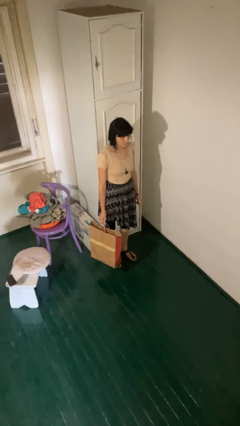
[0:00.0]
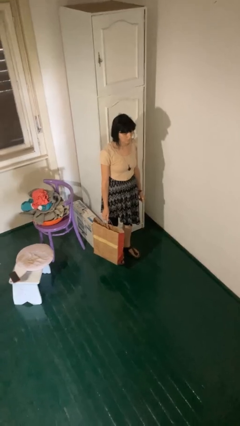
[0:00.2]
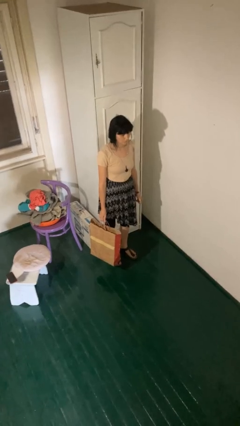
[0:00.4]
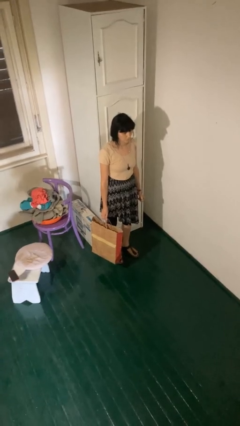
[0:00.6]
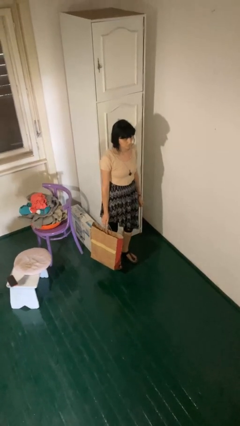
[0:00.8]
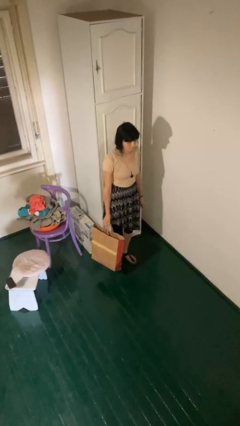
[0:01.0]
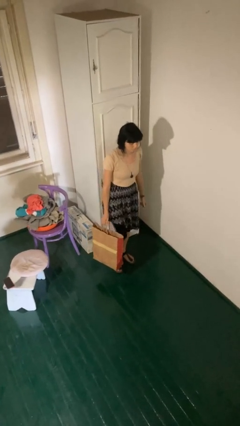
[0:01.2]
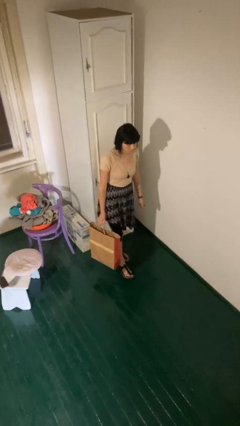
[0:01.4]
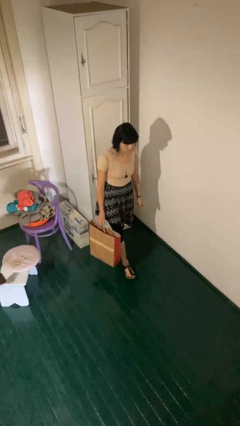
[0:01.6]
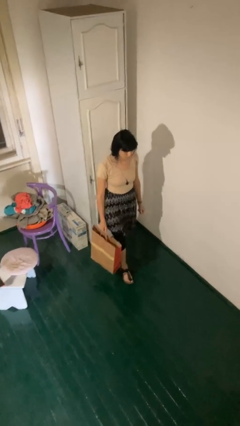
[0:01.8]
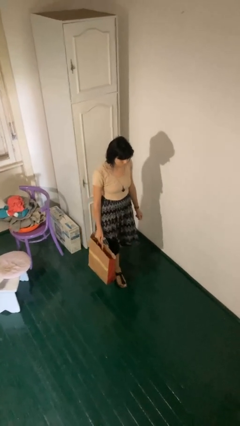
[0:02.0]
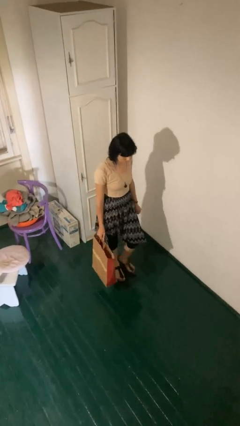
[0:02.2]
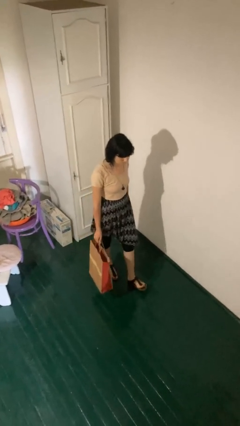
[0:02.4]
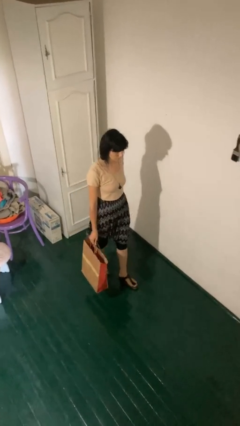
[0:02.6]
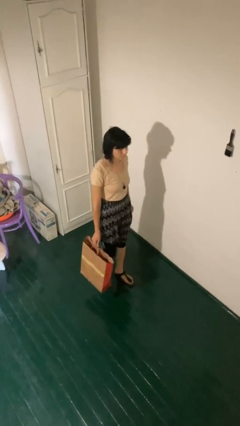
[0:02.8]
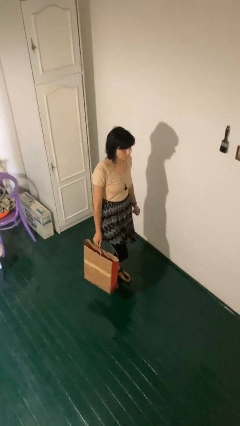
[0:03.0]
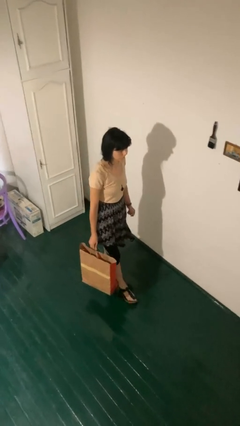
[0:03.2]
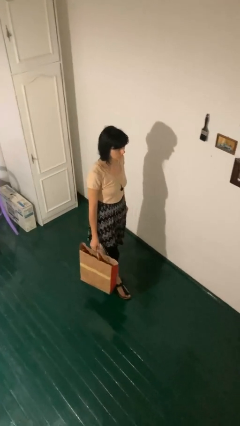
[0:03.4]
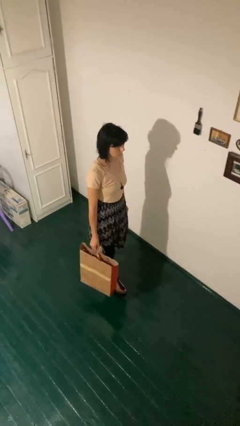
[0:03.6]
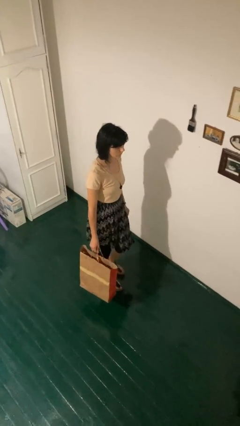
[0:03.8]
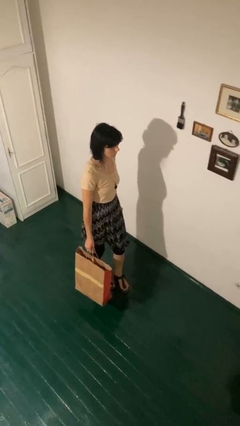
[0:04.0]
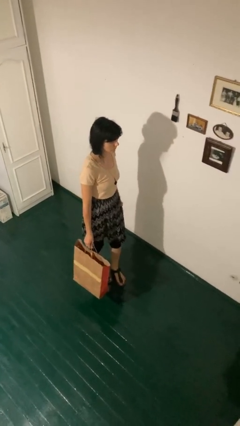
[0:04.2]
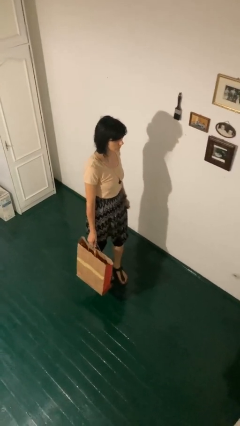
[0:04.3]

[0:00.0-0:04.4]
person carries groceries

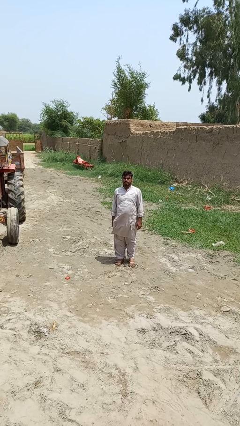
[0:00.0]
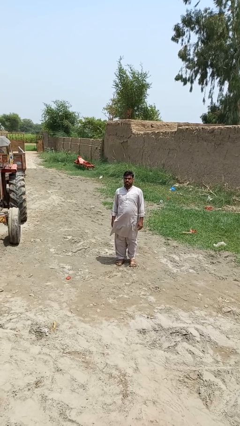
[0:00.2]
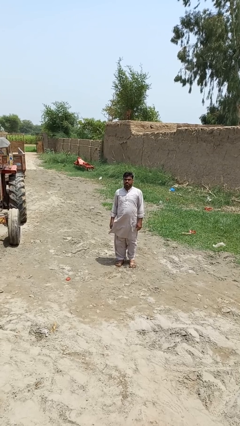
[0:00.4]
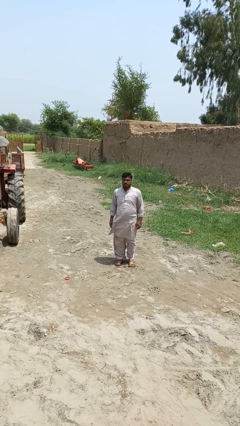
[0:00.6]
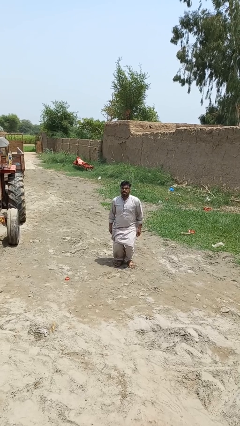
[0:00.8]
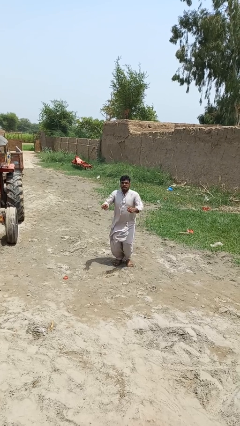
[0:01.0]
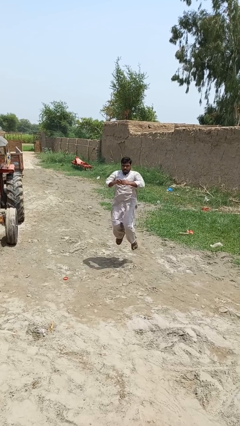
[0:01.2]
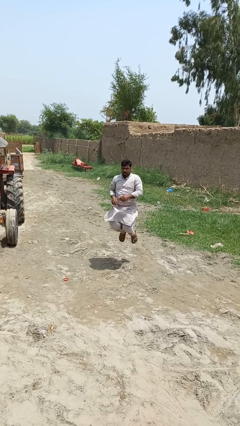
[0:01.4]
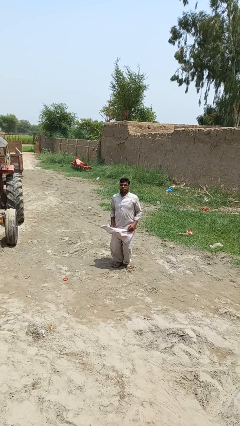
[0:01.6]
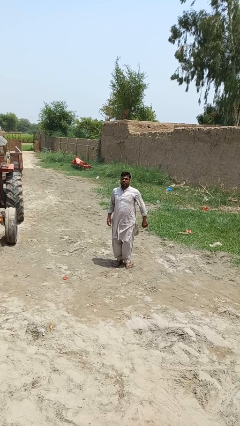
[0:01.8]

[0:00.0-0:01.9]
person jumps

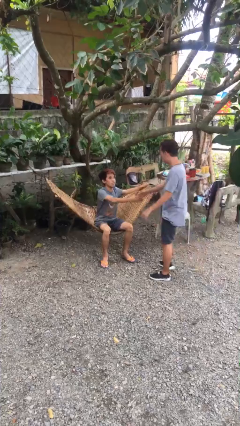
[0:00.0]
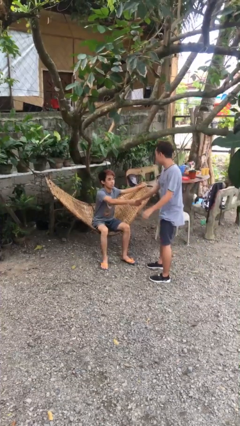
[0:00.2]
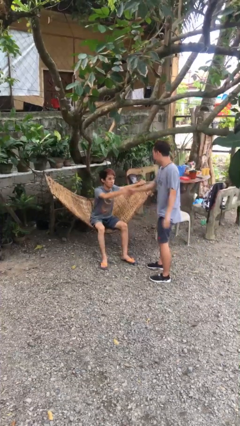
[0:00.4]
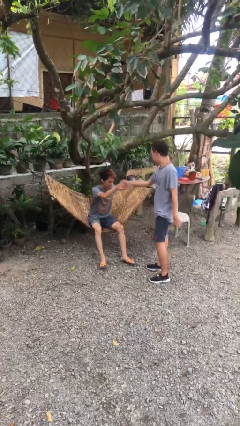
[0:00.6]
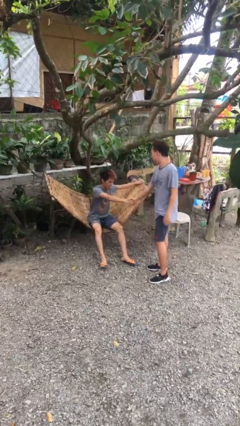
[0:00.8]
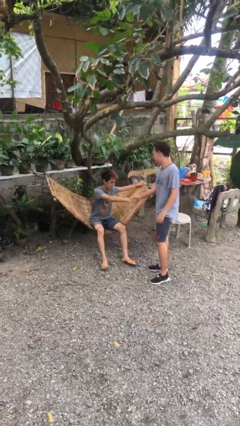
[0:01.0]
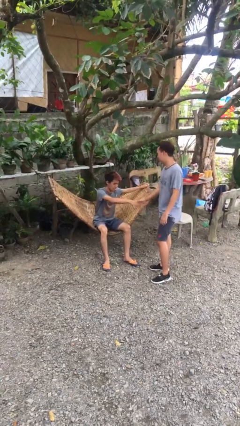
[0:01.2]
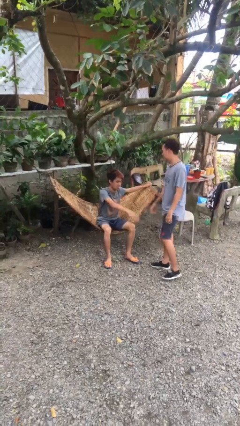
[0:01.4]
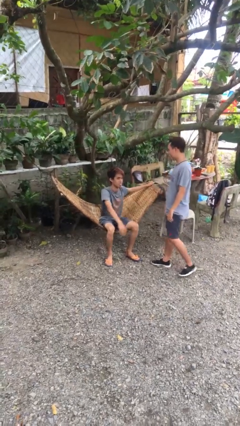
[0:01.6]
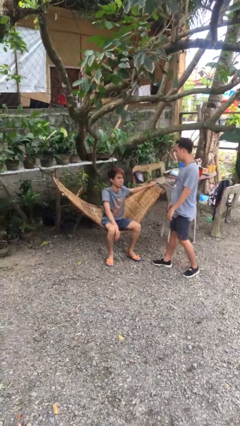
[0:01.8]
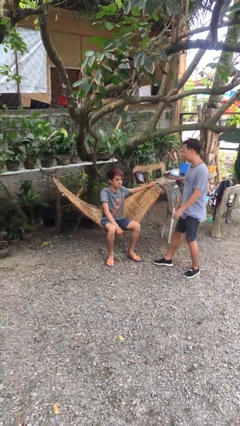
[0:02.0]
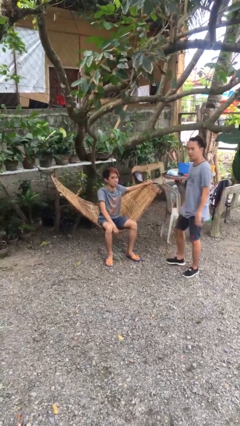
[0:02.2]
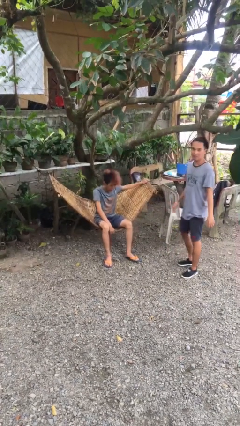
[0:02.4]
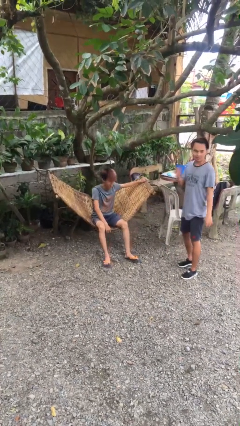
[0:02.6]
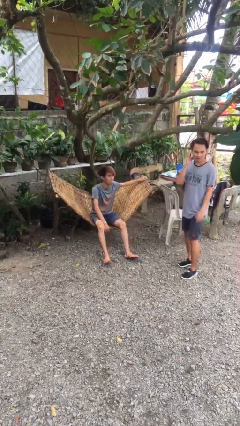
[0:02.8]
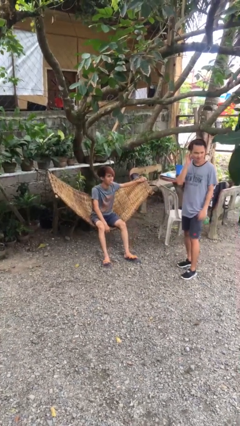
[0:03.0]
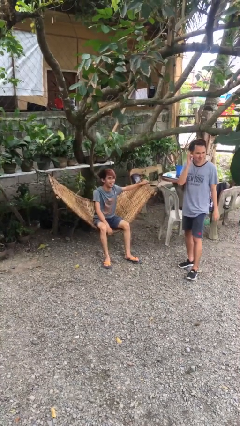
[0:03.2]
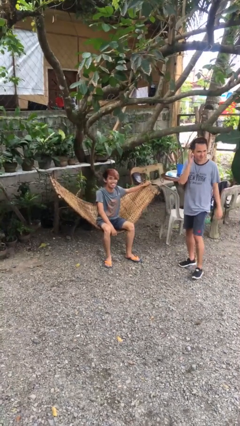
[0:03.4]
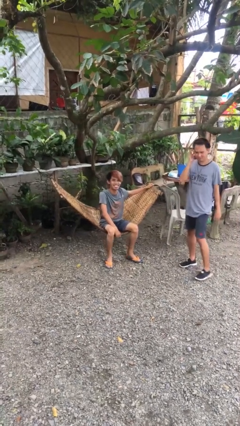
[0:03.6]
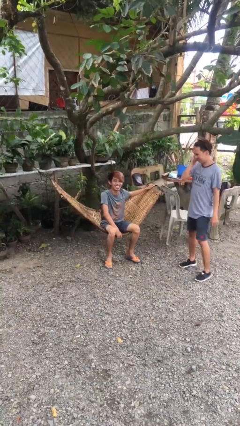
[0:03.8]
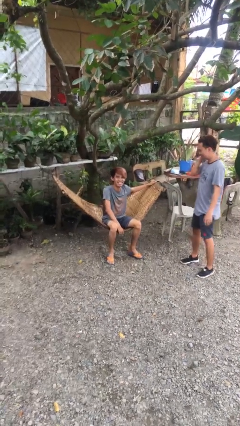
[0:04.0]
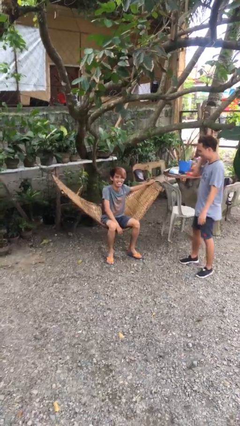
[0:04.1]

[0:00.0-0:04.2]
person shakes hand

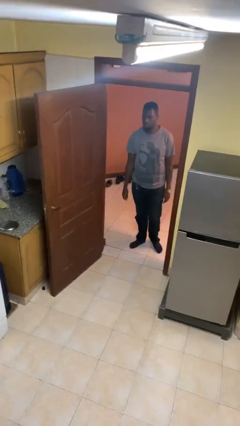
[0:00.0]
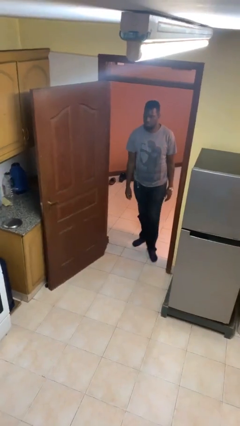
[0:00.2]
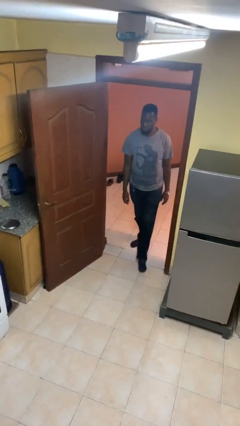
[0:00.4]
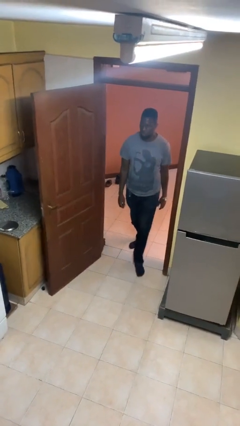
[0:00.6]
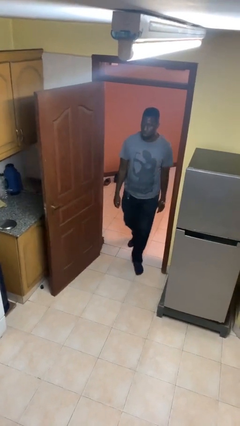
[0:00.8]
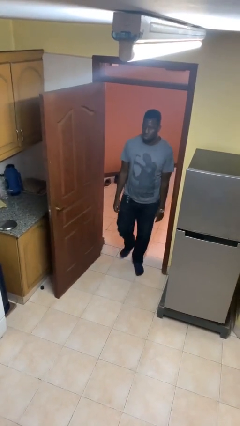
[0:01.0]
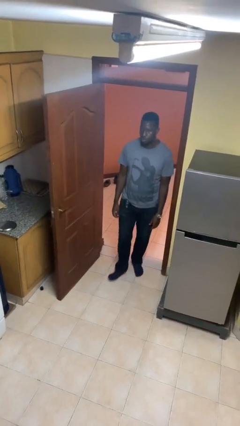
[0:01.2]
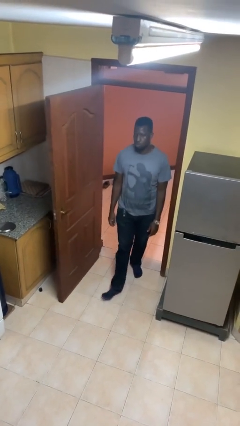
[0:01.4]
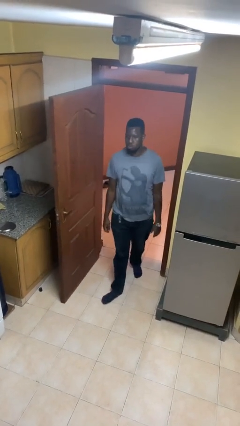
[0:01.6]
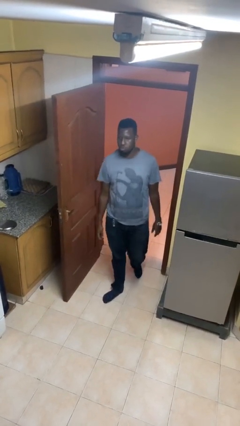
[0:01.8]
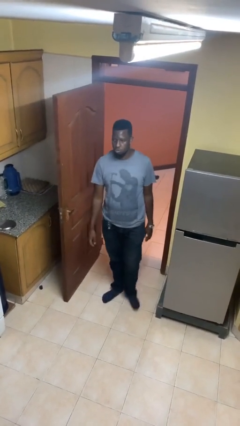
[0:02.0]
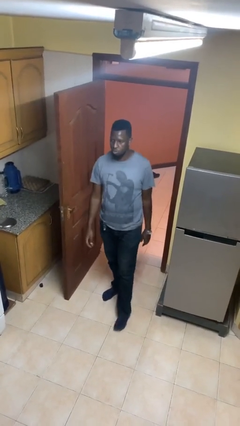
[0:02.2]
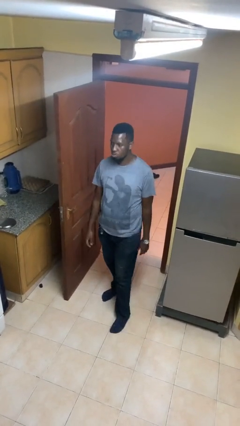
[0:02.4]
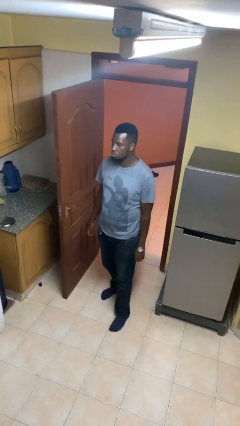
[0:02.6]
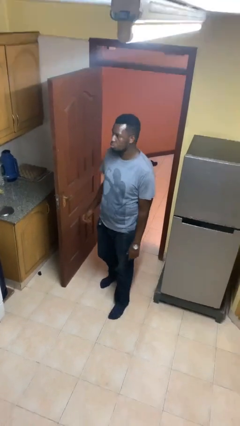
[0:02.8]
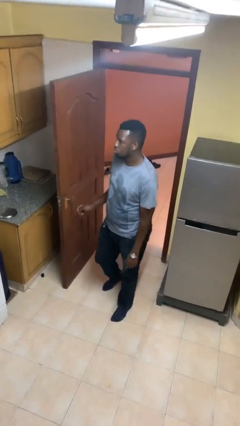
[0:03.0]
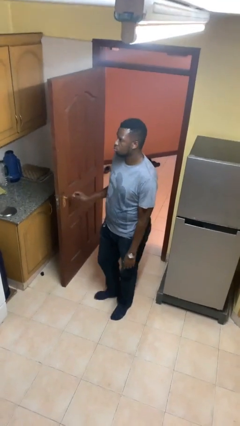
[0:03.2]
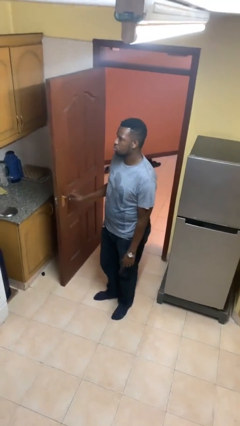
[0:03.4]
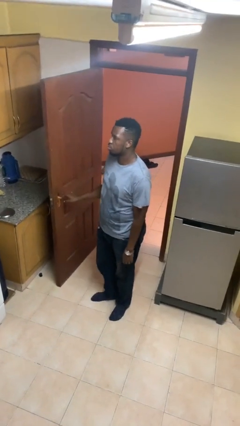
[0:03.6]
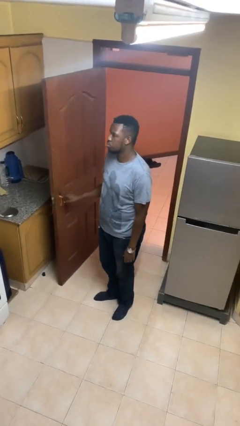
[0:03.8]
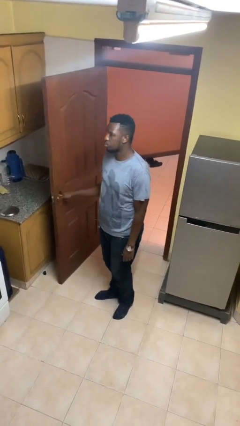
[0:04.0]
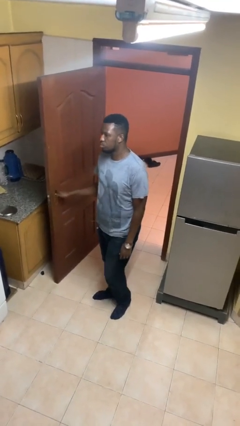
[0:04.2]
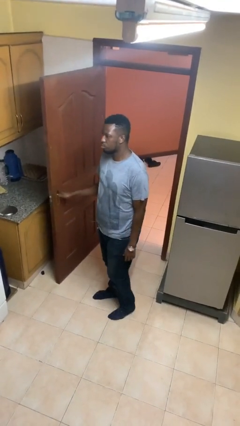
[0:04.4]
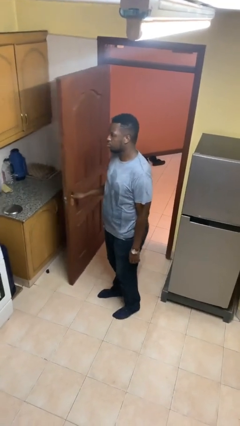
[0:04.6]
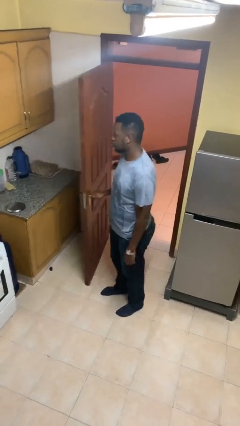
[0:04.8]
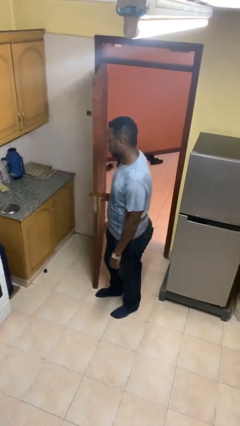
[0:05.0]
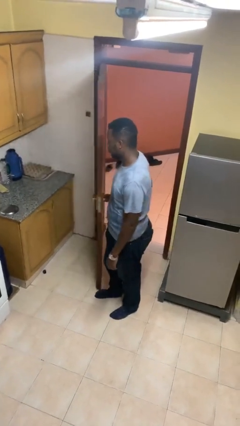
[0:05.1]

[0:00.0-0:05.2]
person enters scene through structure

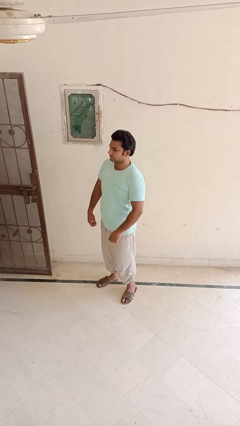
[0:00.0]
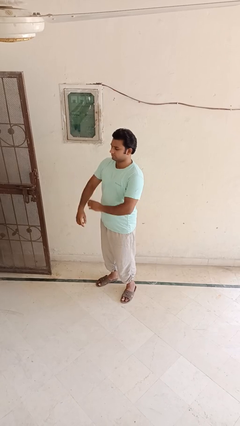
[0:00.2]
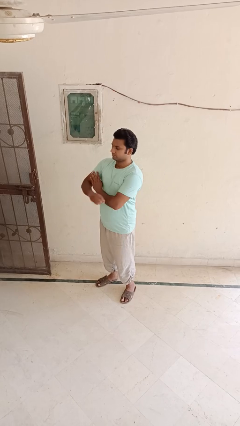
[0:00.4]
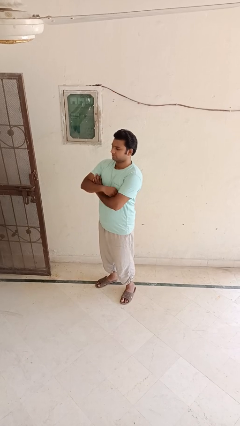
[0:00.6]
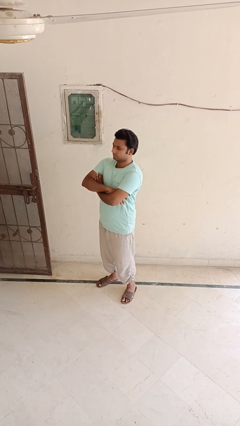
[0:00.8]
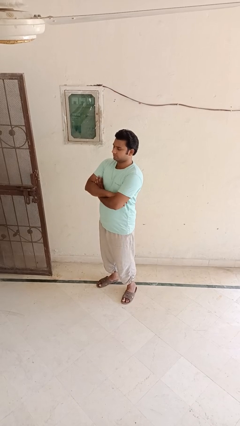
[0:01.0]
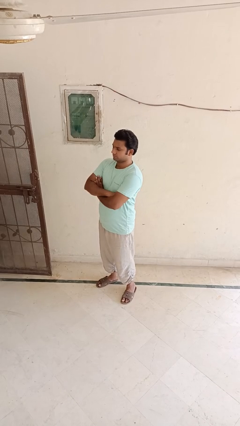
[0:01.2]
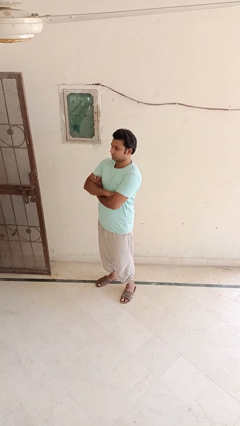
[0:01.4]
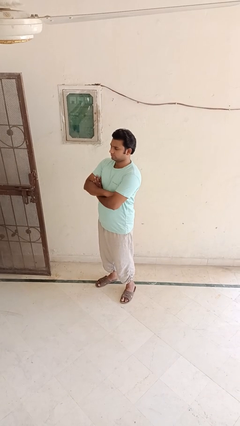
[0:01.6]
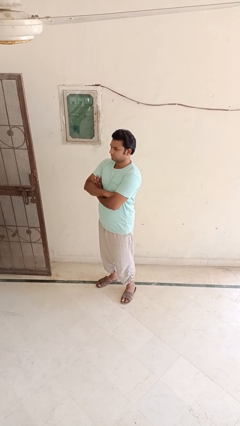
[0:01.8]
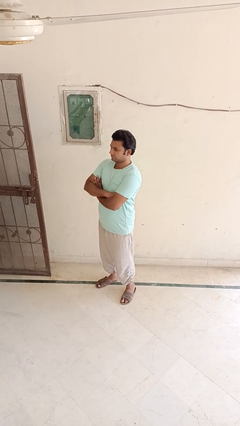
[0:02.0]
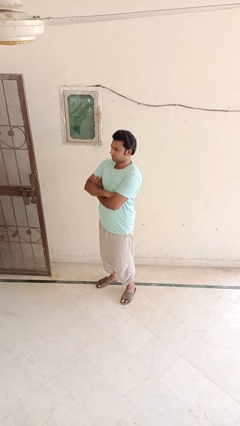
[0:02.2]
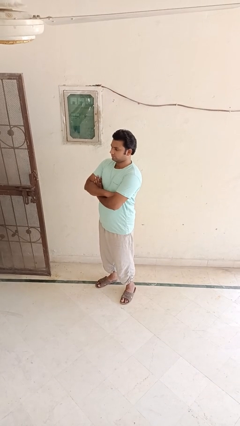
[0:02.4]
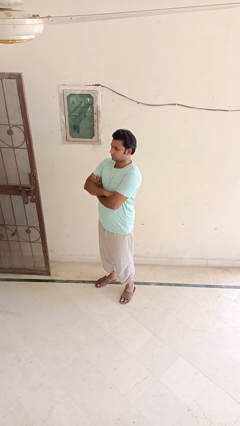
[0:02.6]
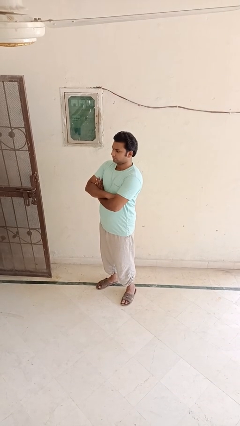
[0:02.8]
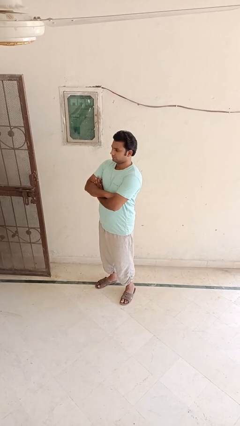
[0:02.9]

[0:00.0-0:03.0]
person crosses arms
